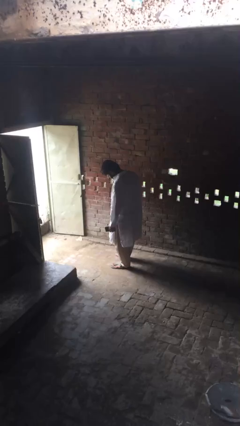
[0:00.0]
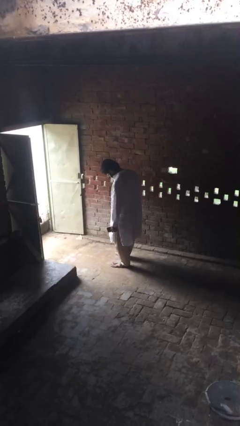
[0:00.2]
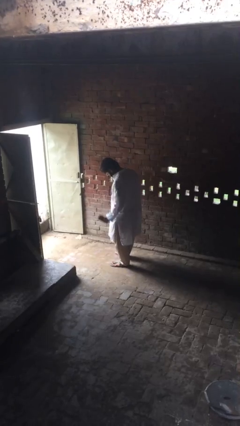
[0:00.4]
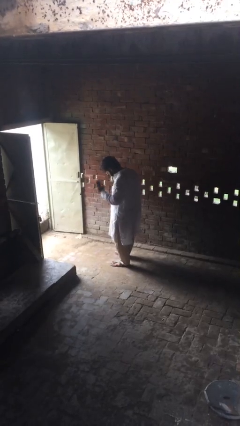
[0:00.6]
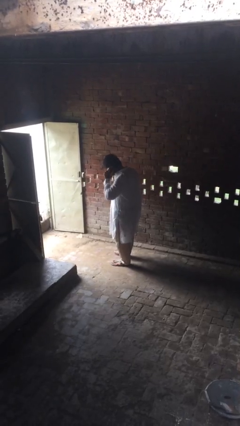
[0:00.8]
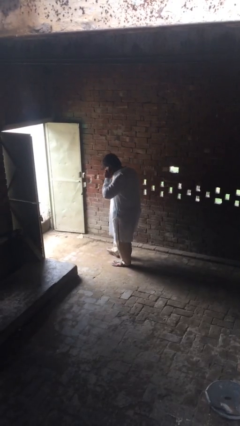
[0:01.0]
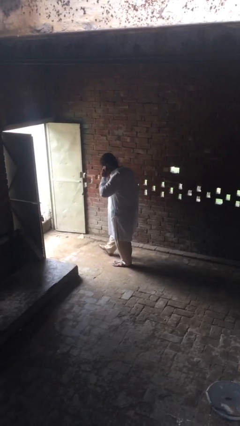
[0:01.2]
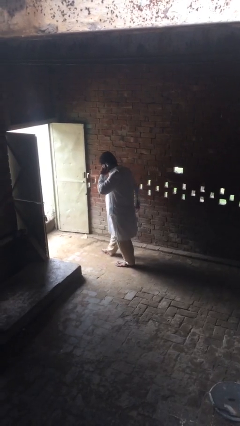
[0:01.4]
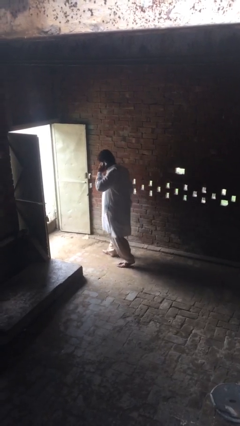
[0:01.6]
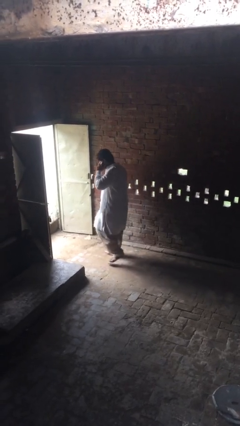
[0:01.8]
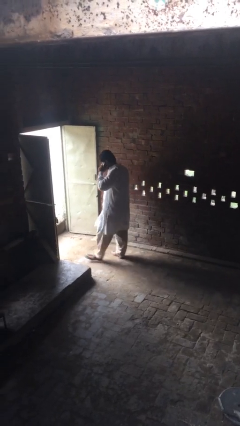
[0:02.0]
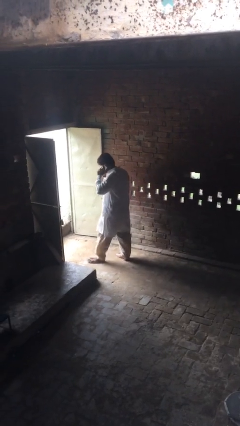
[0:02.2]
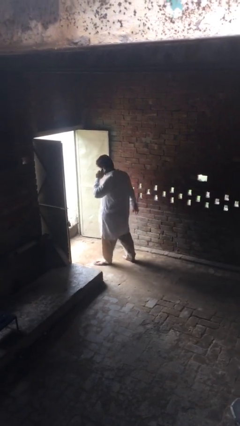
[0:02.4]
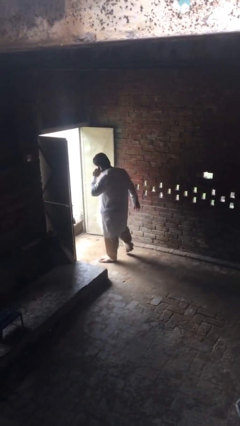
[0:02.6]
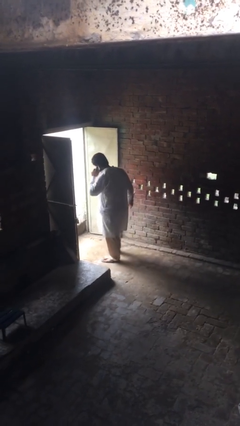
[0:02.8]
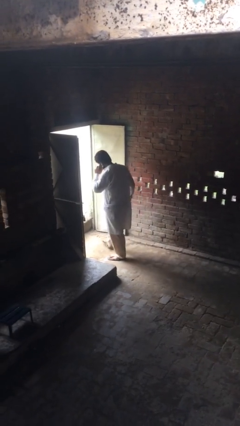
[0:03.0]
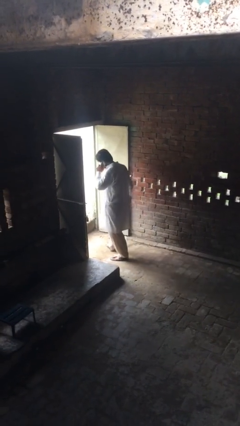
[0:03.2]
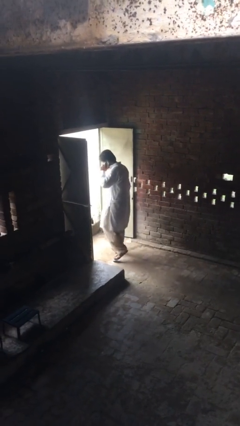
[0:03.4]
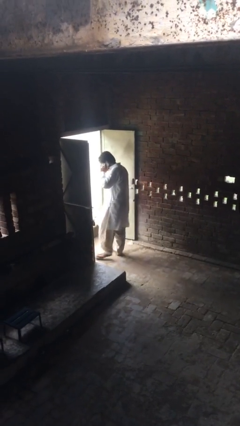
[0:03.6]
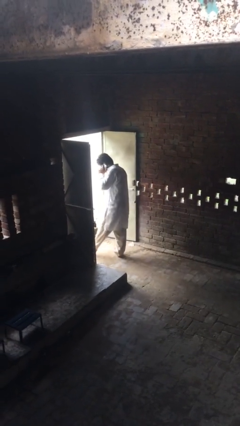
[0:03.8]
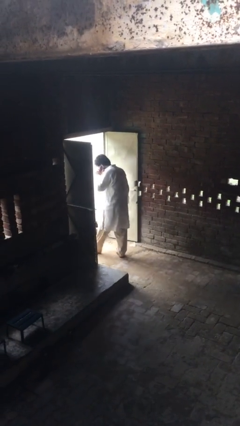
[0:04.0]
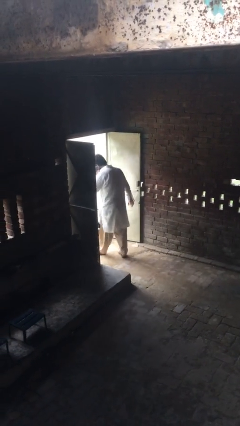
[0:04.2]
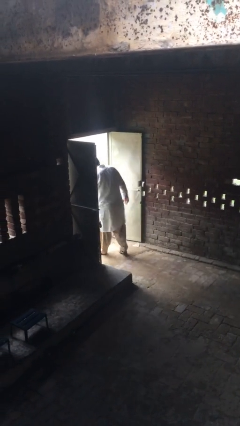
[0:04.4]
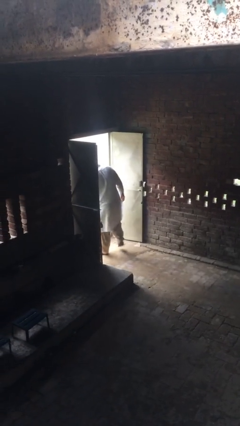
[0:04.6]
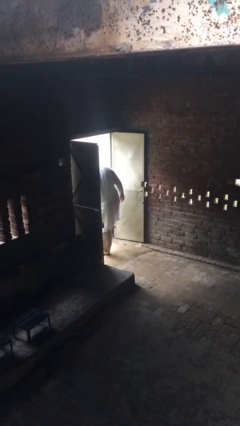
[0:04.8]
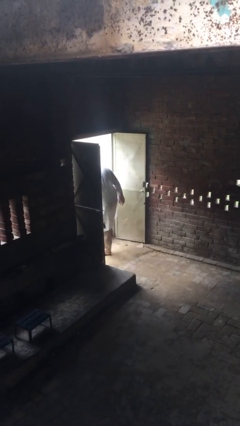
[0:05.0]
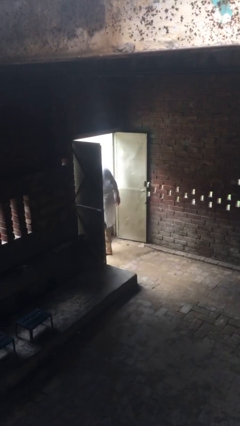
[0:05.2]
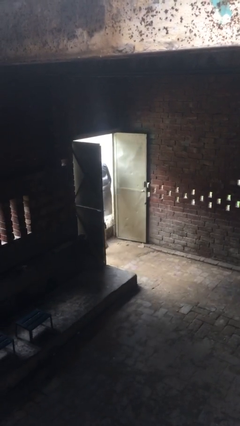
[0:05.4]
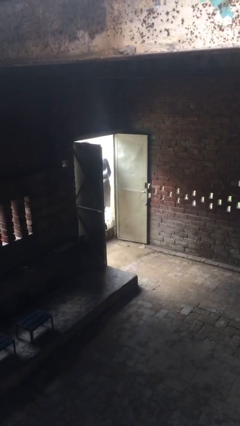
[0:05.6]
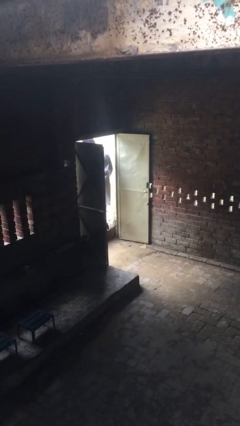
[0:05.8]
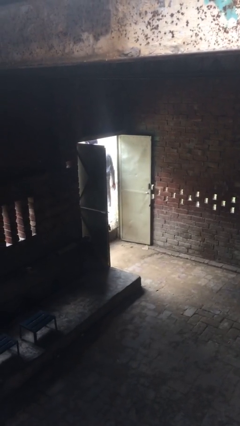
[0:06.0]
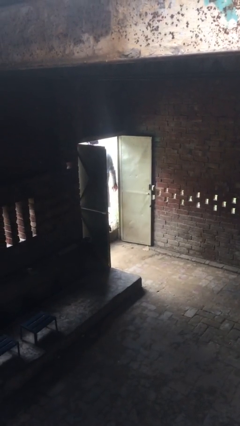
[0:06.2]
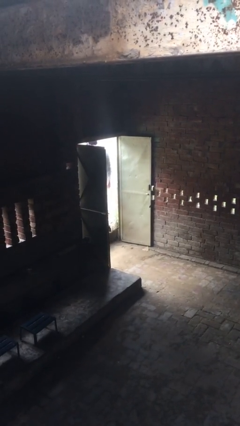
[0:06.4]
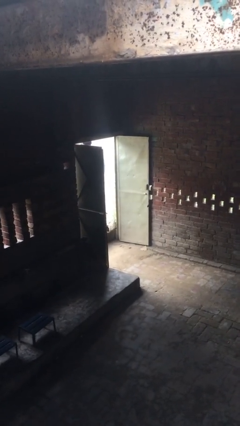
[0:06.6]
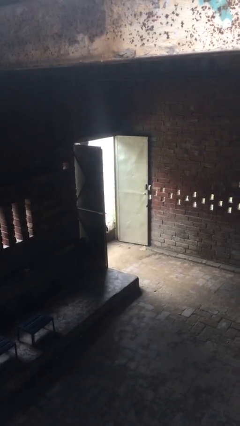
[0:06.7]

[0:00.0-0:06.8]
person exits scene through structure

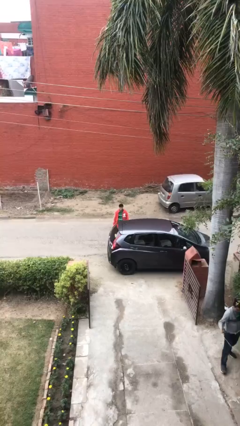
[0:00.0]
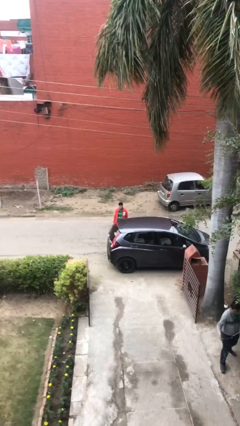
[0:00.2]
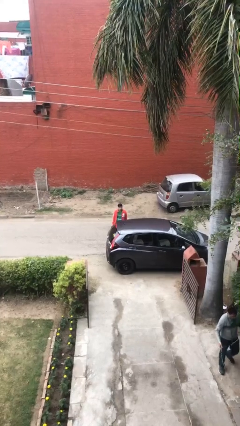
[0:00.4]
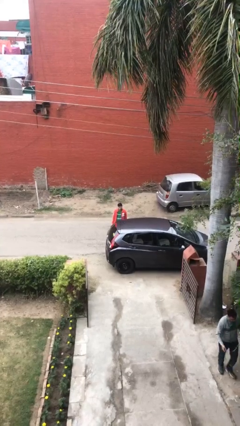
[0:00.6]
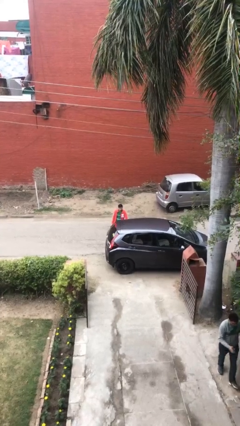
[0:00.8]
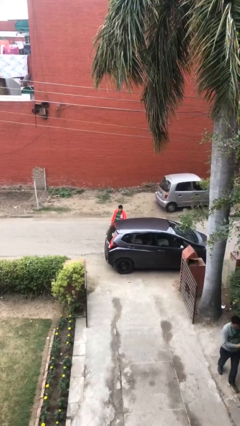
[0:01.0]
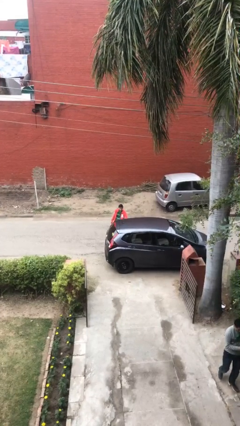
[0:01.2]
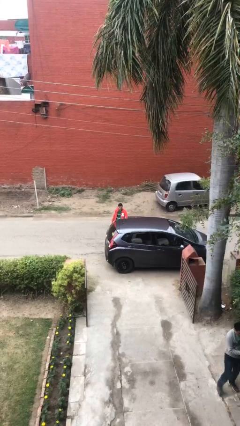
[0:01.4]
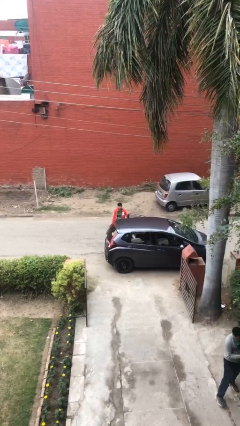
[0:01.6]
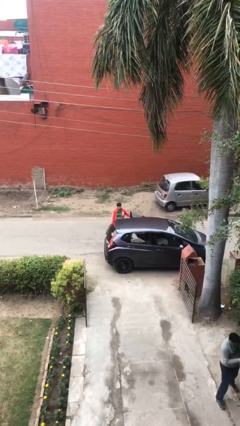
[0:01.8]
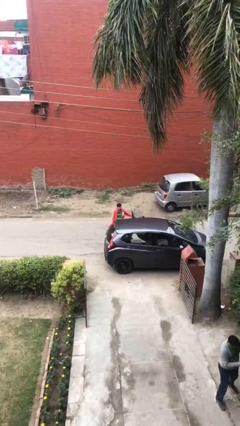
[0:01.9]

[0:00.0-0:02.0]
person opens car door

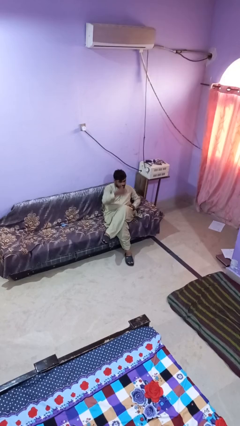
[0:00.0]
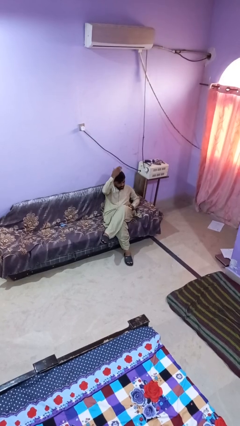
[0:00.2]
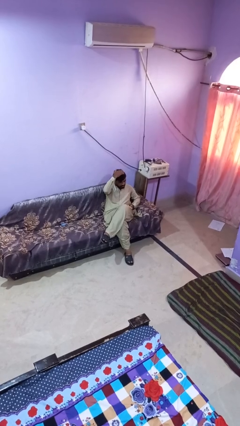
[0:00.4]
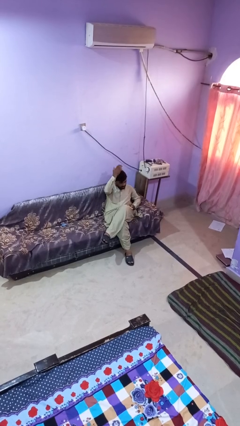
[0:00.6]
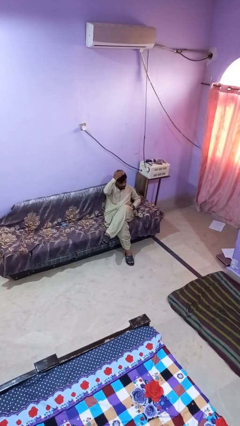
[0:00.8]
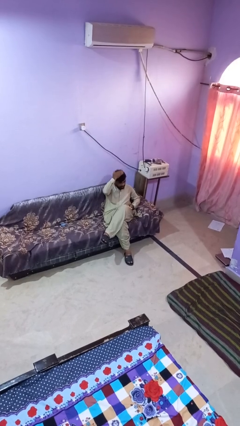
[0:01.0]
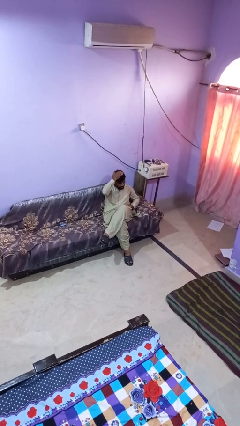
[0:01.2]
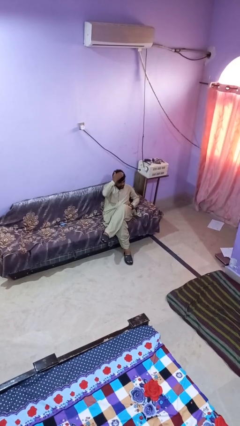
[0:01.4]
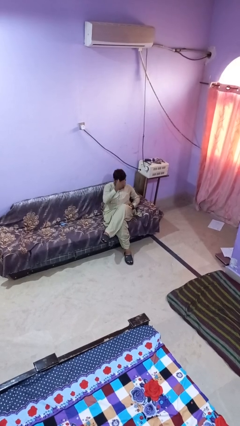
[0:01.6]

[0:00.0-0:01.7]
person pats head

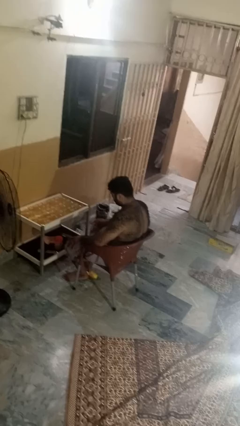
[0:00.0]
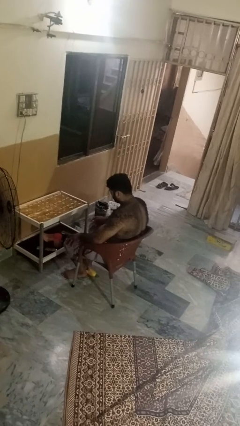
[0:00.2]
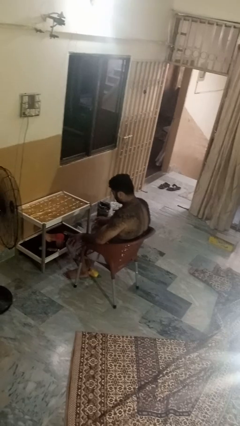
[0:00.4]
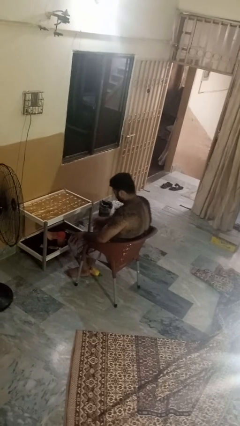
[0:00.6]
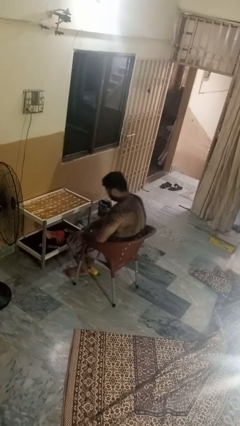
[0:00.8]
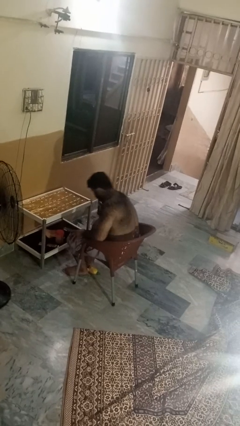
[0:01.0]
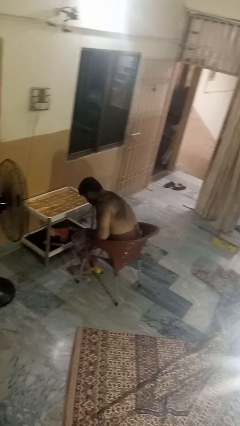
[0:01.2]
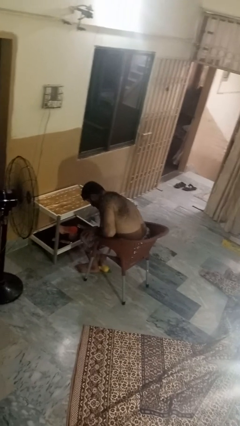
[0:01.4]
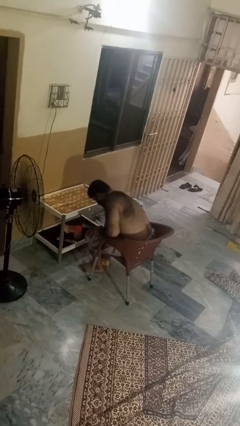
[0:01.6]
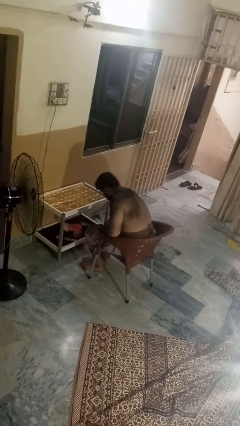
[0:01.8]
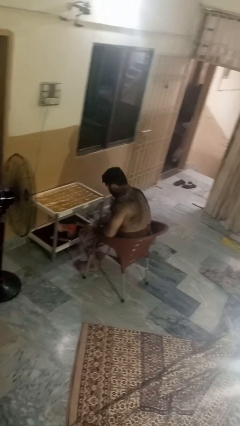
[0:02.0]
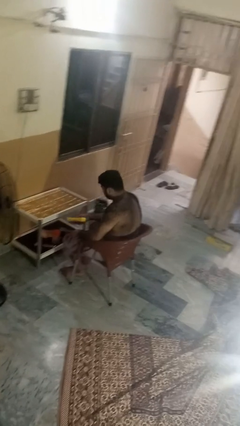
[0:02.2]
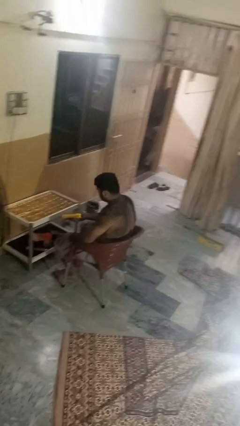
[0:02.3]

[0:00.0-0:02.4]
person picks up object from floor

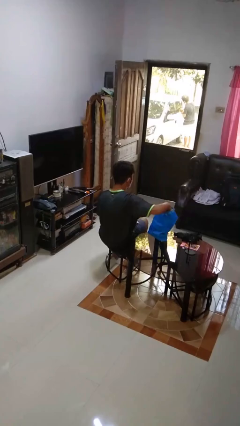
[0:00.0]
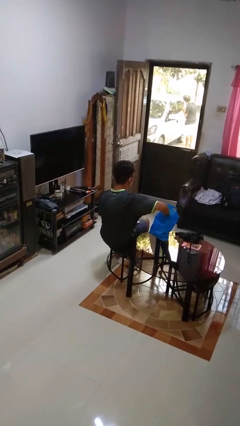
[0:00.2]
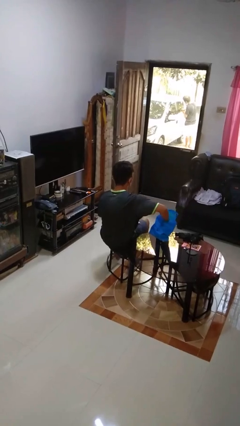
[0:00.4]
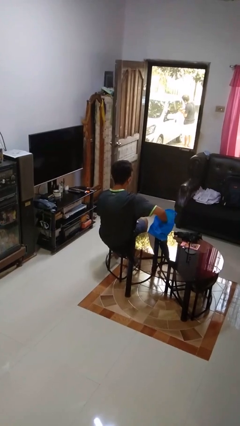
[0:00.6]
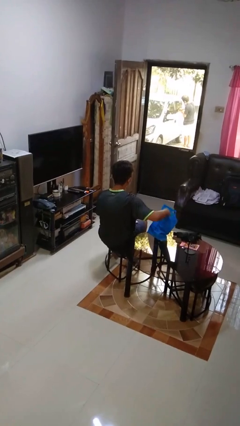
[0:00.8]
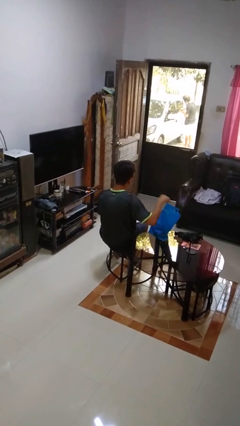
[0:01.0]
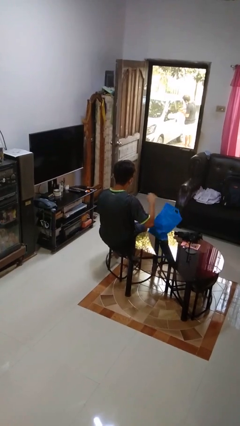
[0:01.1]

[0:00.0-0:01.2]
person puts object into bag

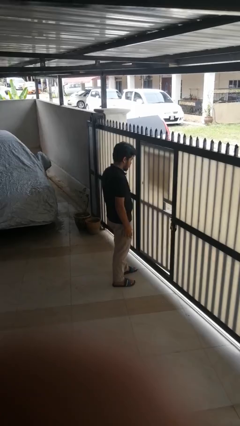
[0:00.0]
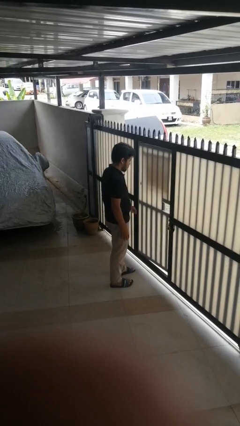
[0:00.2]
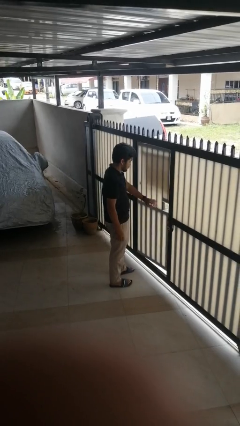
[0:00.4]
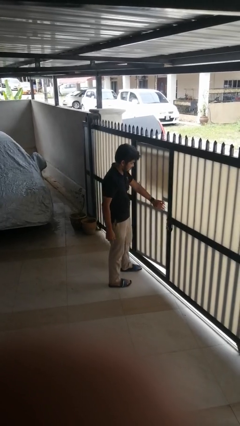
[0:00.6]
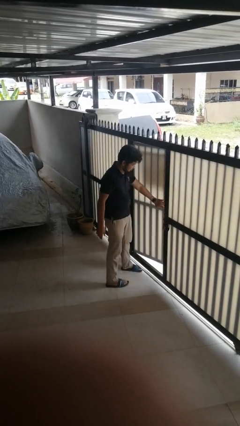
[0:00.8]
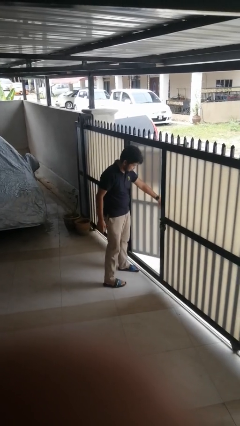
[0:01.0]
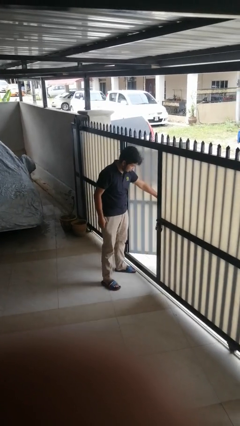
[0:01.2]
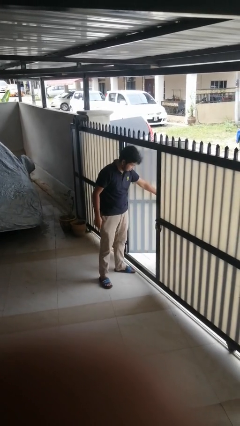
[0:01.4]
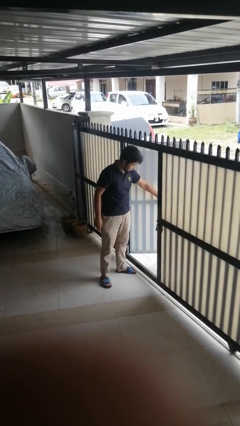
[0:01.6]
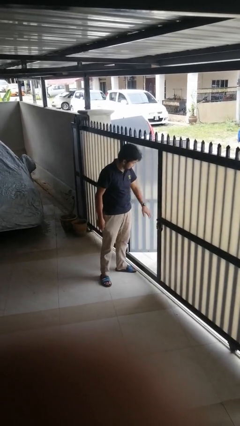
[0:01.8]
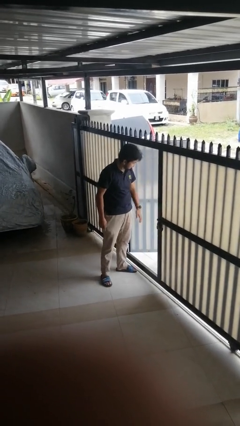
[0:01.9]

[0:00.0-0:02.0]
person opens gate

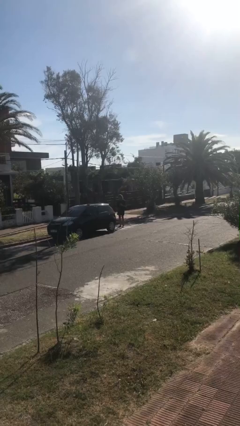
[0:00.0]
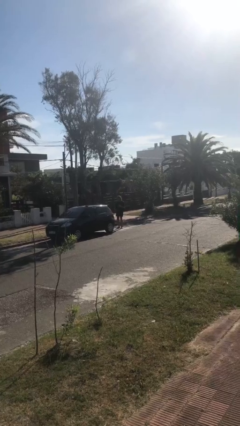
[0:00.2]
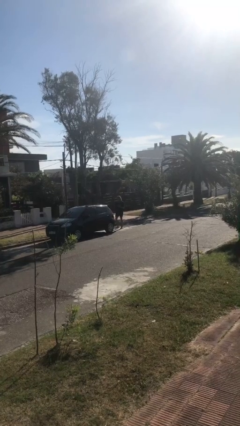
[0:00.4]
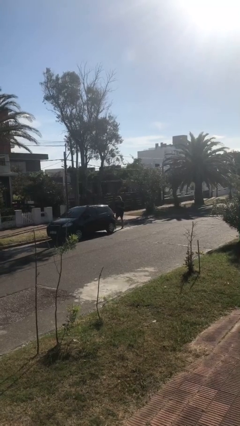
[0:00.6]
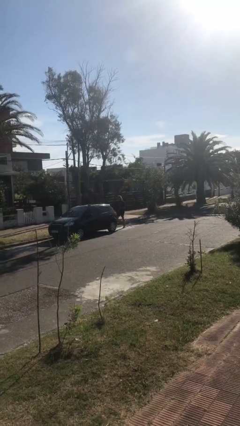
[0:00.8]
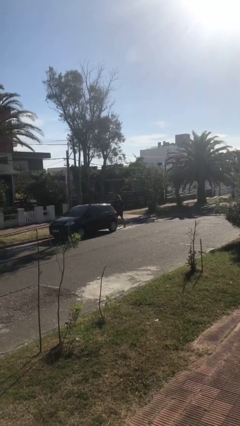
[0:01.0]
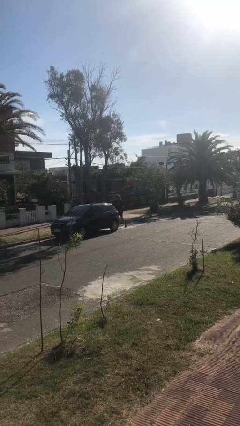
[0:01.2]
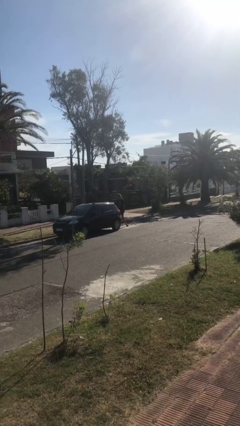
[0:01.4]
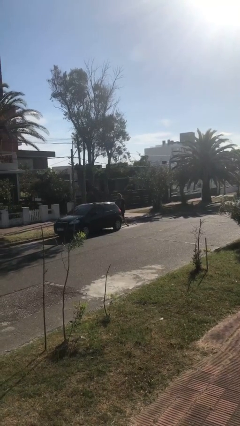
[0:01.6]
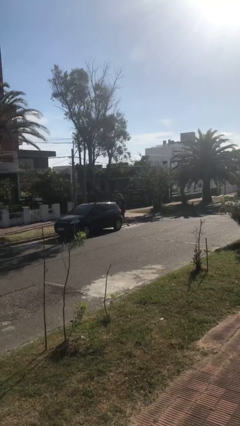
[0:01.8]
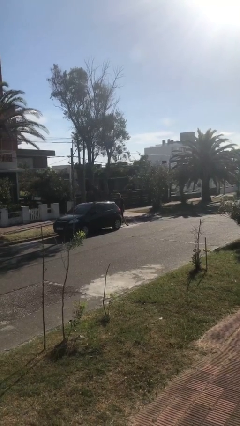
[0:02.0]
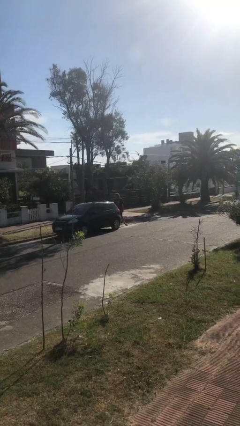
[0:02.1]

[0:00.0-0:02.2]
person loads car
